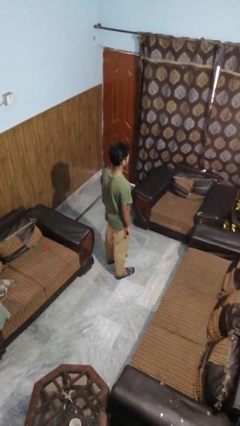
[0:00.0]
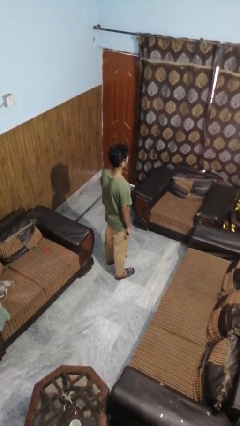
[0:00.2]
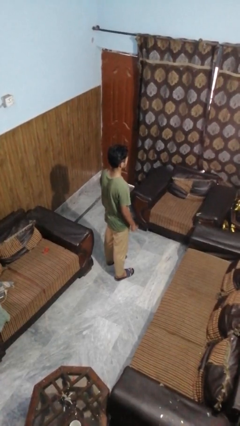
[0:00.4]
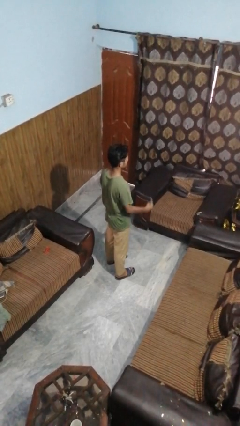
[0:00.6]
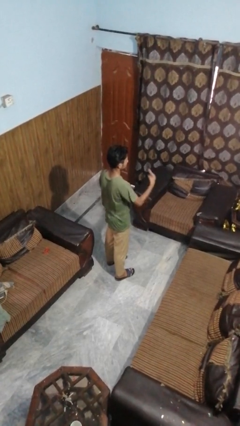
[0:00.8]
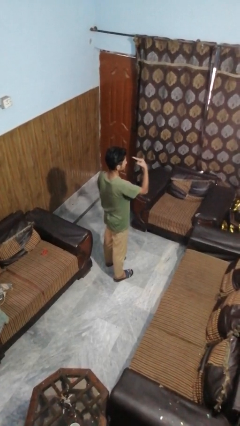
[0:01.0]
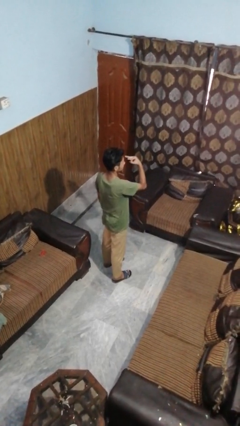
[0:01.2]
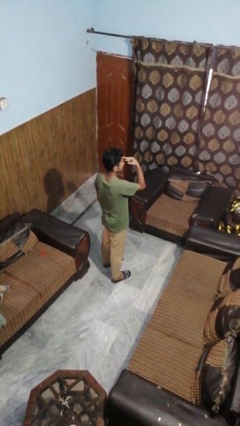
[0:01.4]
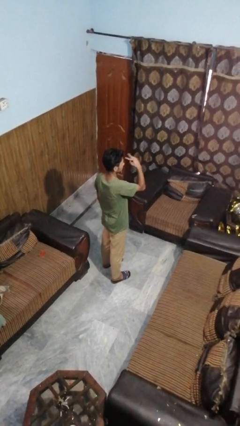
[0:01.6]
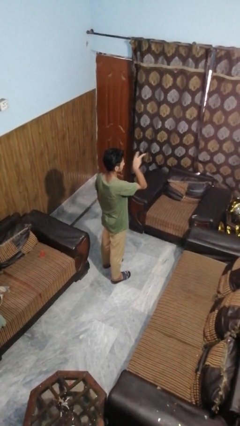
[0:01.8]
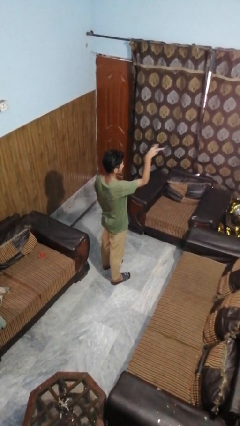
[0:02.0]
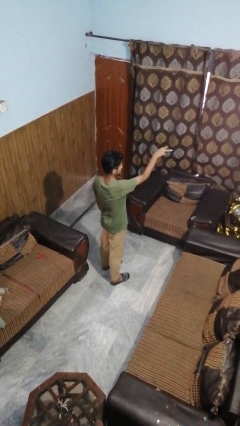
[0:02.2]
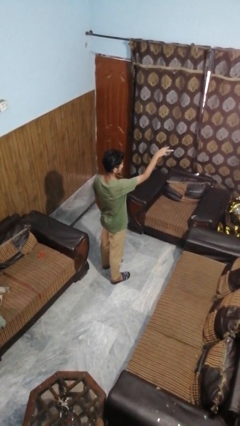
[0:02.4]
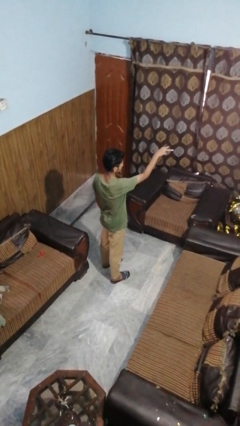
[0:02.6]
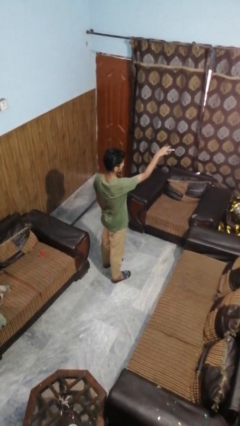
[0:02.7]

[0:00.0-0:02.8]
person gestures watch closely

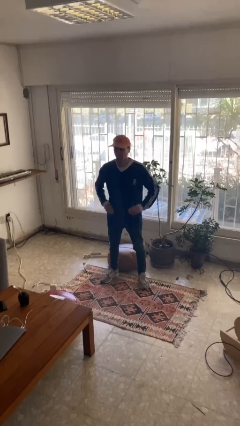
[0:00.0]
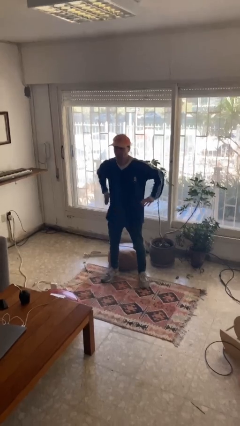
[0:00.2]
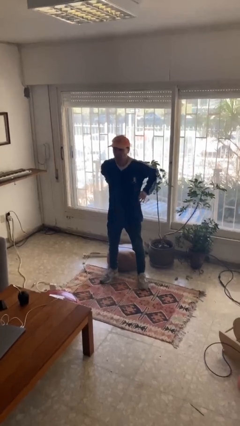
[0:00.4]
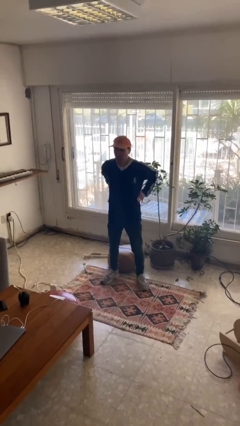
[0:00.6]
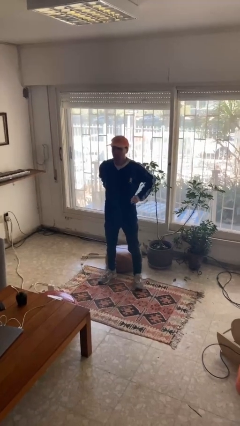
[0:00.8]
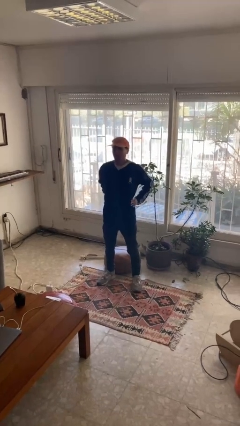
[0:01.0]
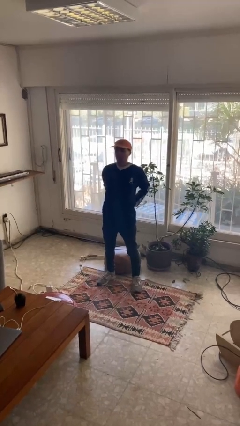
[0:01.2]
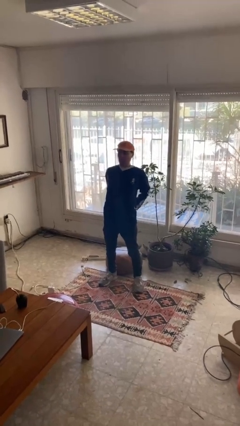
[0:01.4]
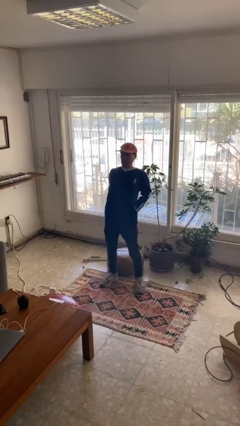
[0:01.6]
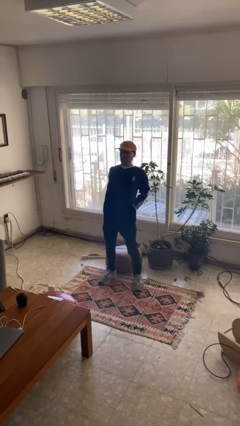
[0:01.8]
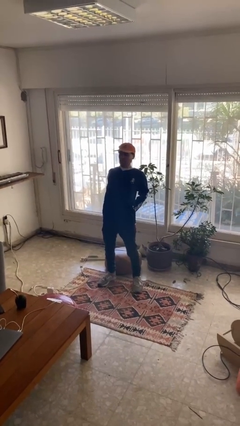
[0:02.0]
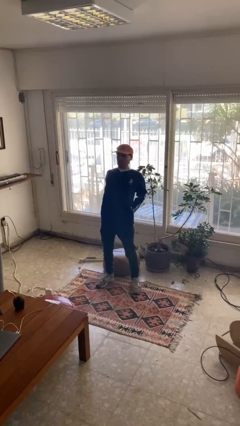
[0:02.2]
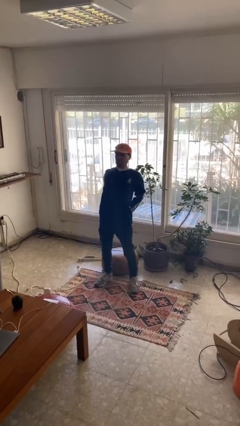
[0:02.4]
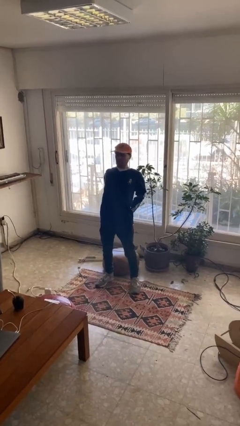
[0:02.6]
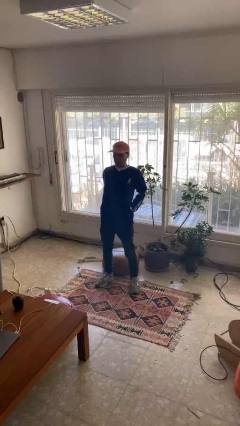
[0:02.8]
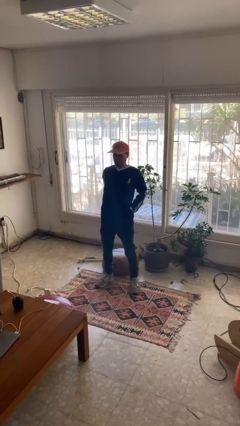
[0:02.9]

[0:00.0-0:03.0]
person stretches back

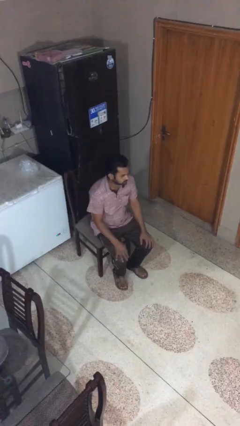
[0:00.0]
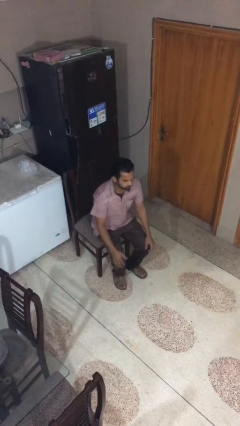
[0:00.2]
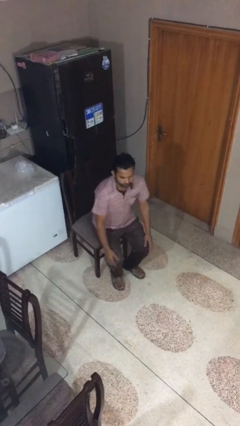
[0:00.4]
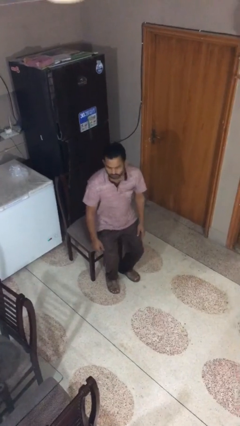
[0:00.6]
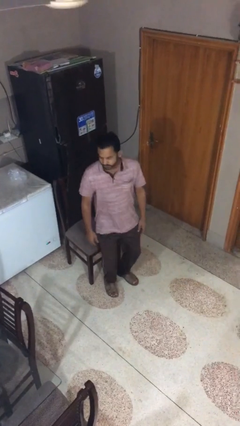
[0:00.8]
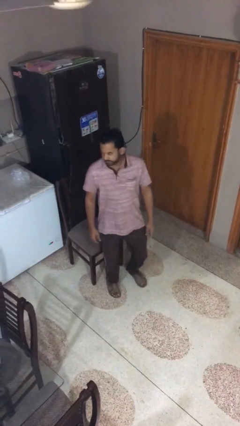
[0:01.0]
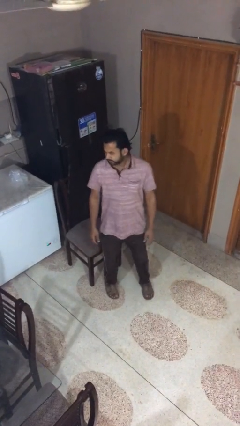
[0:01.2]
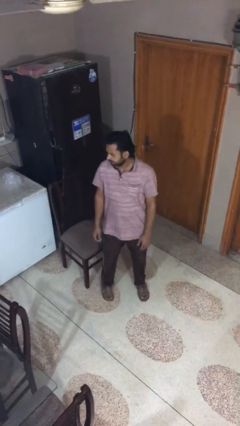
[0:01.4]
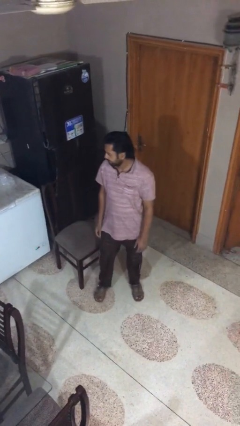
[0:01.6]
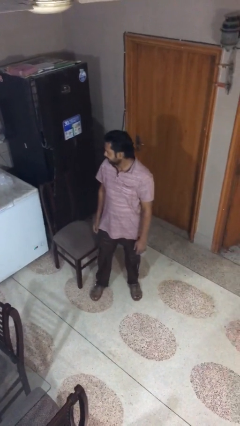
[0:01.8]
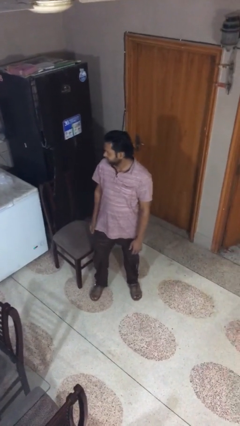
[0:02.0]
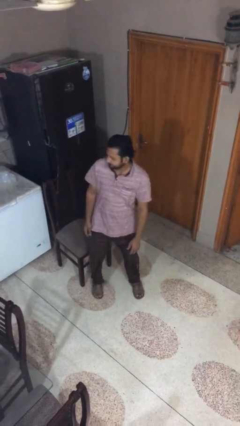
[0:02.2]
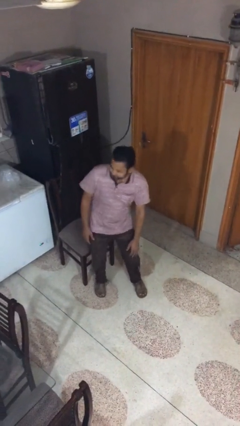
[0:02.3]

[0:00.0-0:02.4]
person stands up

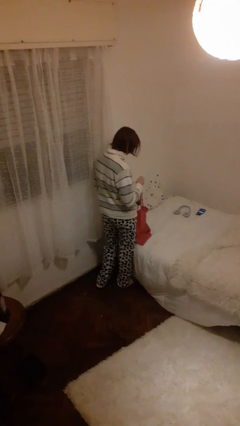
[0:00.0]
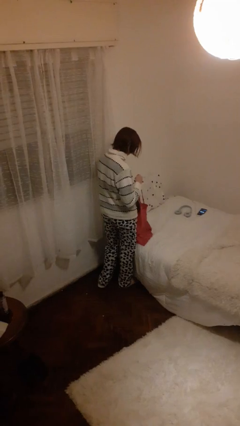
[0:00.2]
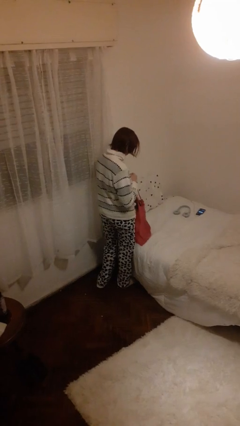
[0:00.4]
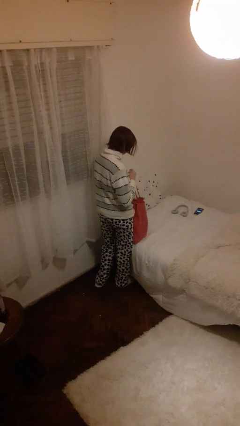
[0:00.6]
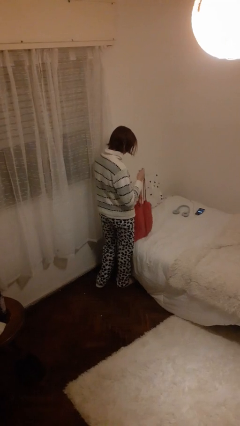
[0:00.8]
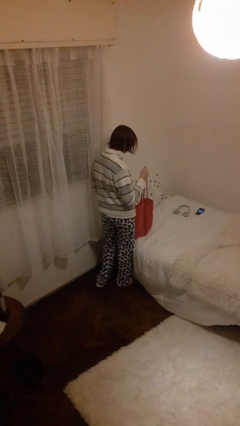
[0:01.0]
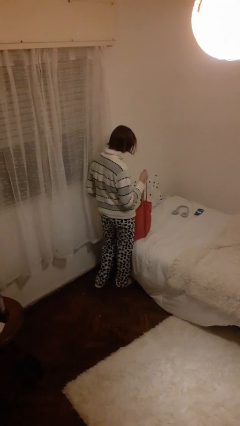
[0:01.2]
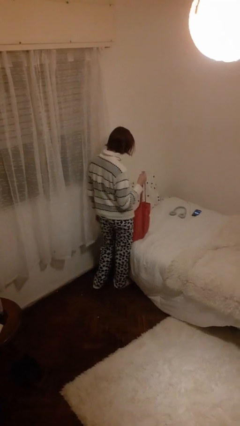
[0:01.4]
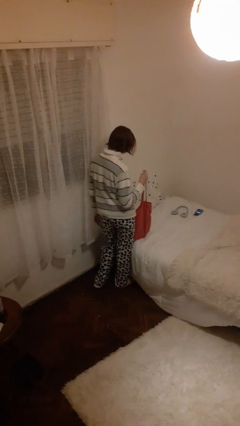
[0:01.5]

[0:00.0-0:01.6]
person puts object into bag

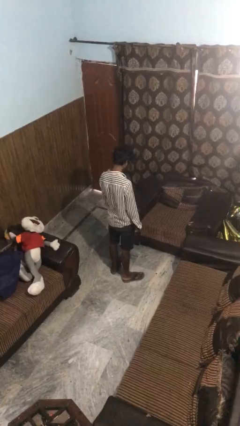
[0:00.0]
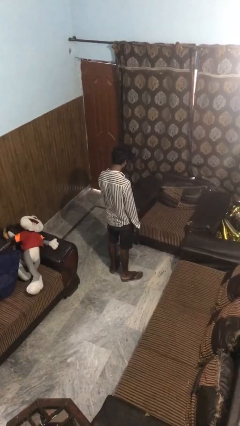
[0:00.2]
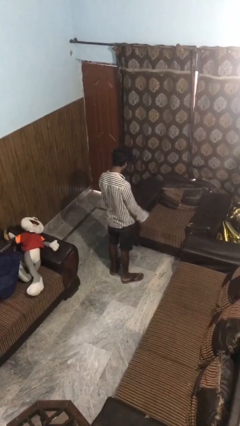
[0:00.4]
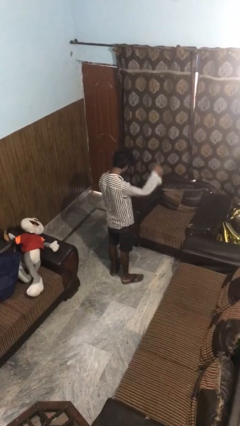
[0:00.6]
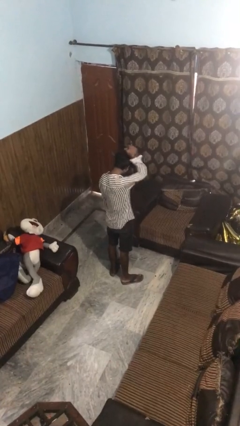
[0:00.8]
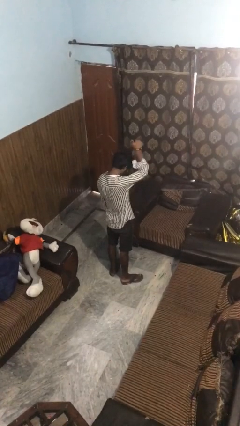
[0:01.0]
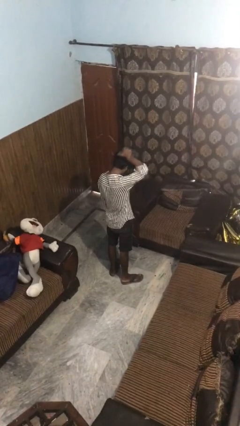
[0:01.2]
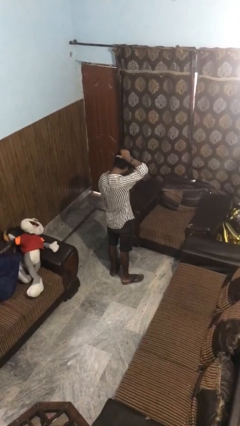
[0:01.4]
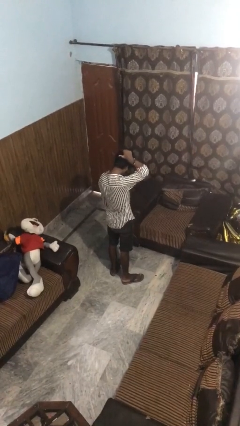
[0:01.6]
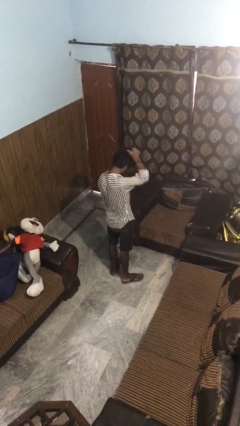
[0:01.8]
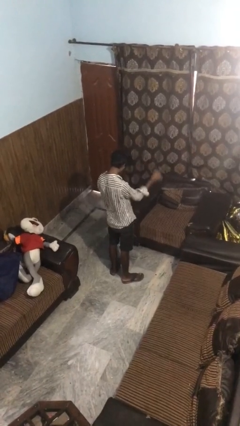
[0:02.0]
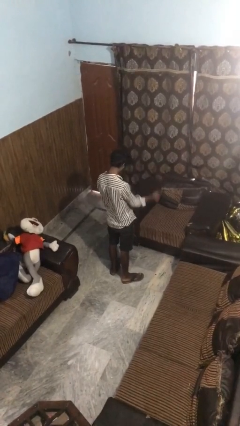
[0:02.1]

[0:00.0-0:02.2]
person gestures behind me

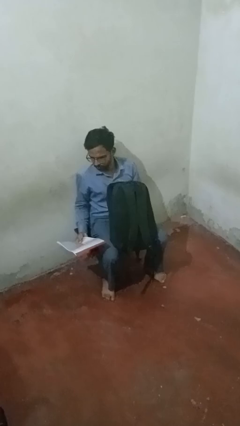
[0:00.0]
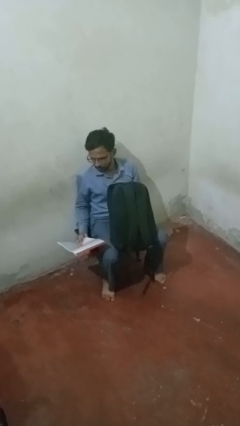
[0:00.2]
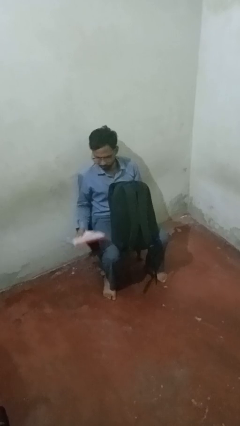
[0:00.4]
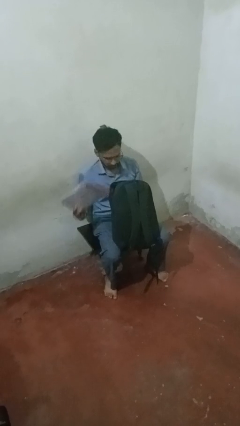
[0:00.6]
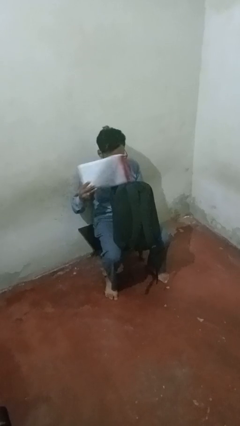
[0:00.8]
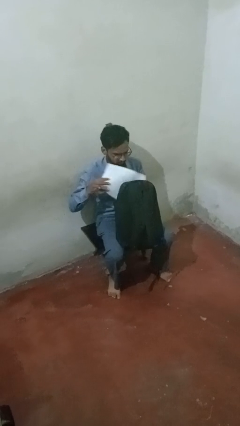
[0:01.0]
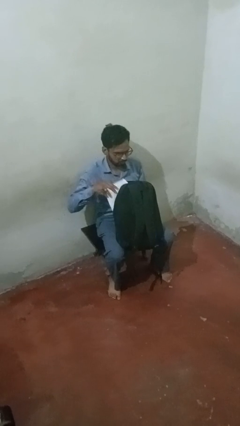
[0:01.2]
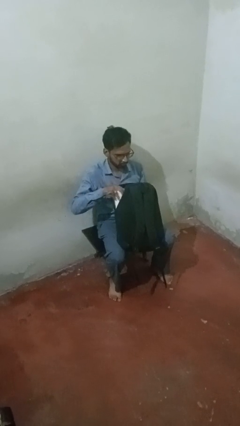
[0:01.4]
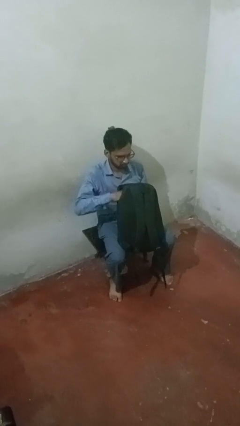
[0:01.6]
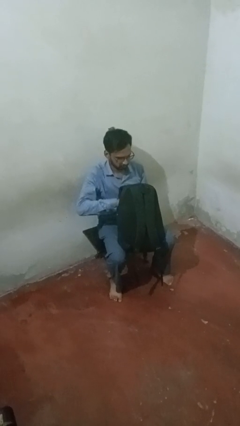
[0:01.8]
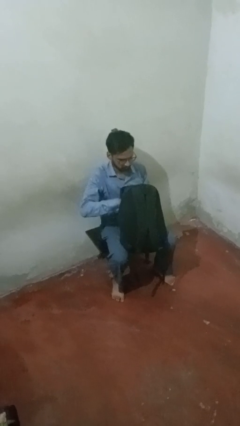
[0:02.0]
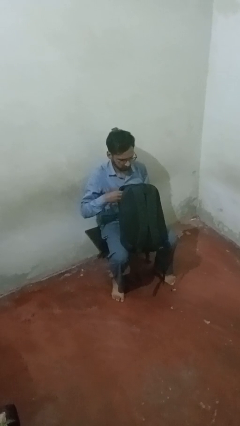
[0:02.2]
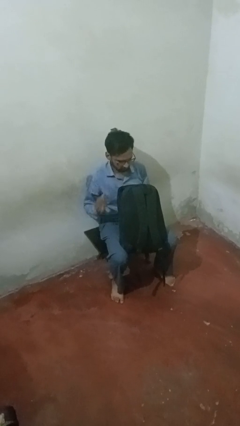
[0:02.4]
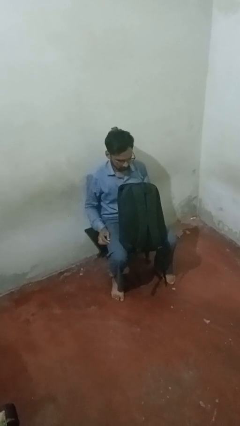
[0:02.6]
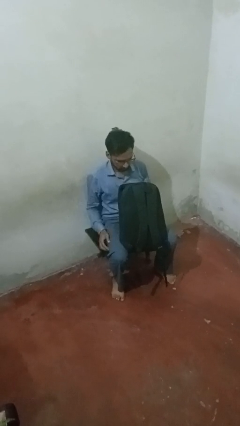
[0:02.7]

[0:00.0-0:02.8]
person puts object into purse

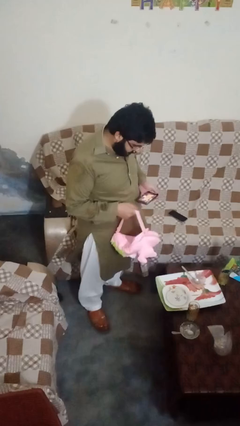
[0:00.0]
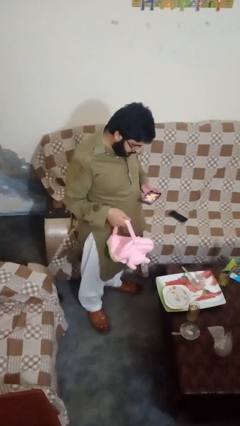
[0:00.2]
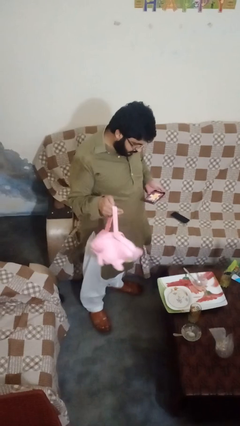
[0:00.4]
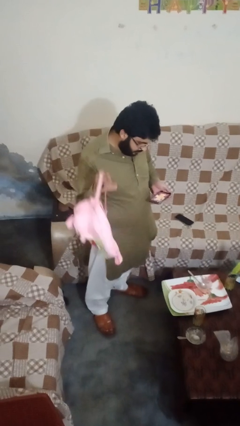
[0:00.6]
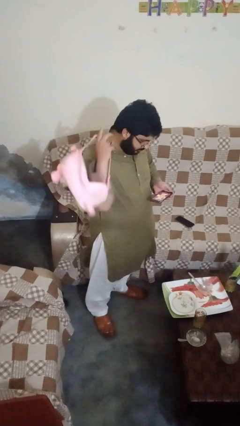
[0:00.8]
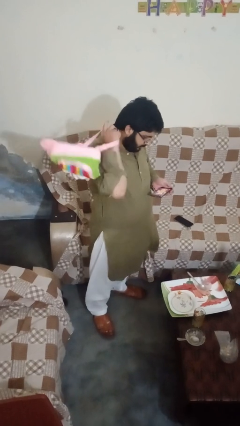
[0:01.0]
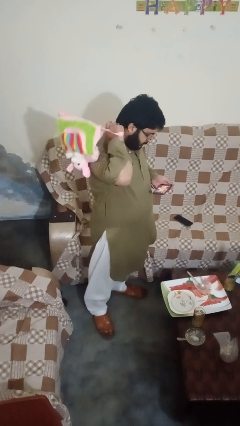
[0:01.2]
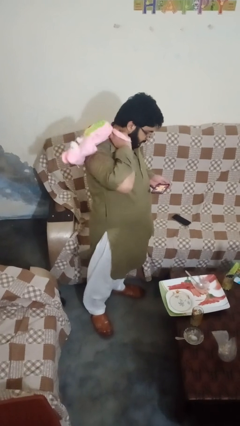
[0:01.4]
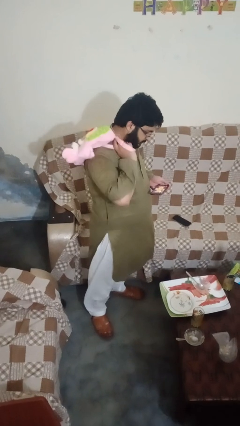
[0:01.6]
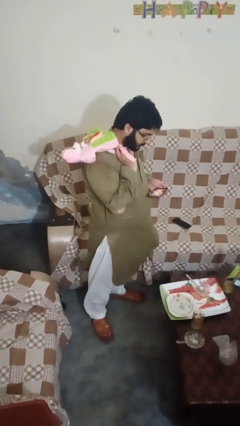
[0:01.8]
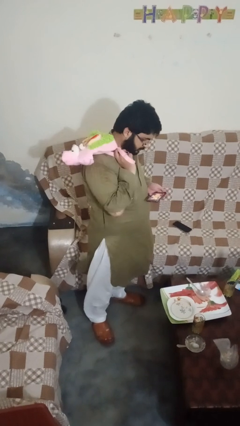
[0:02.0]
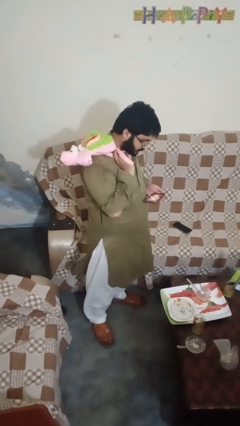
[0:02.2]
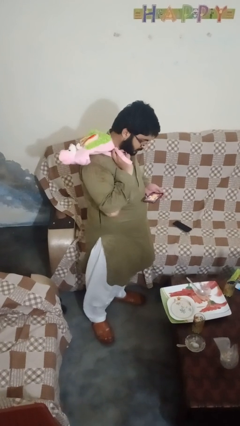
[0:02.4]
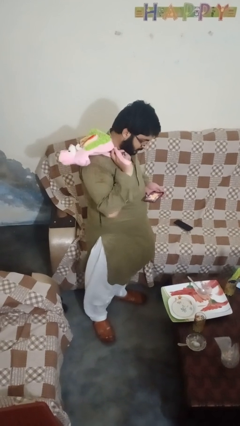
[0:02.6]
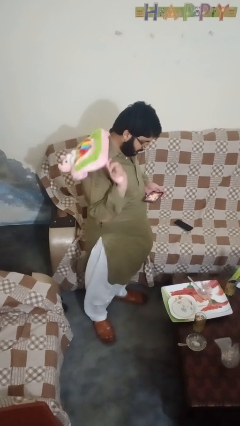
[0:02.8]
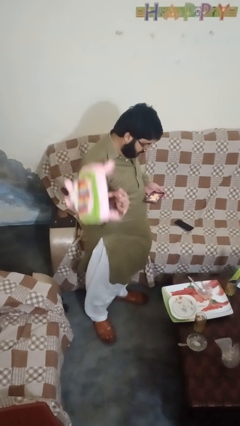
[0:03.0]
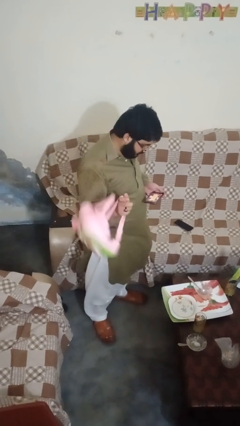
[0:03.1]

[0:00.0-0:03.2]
person puts on backpack
